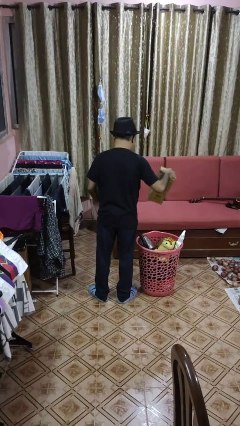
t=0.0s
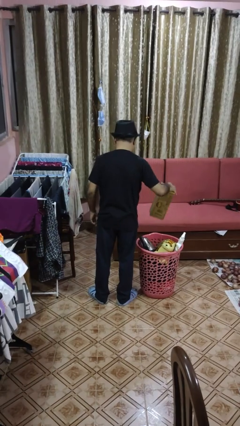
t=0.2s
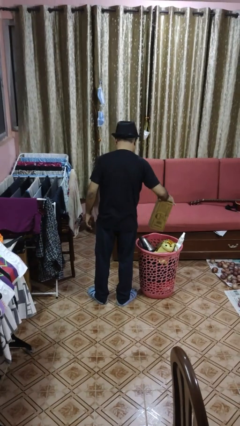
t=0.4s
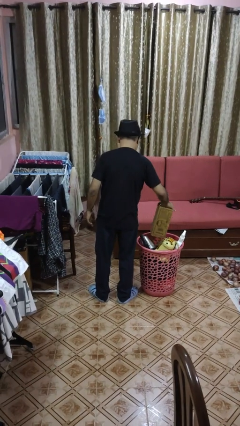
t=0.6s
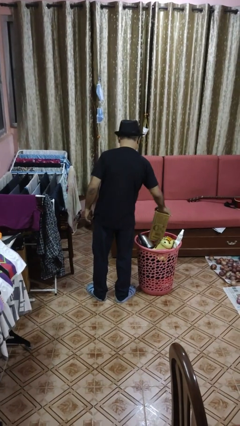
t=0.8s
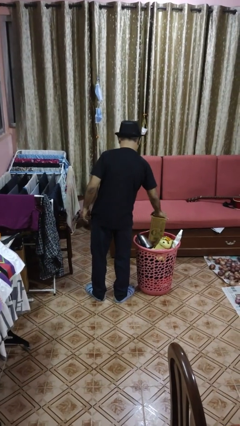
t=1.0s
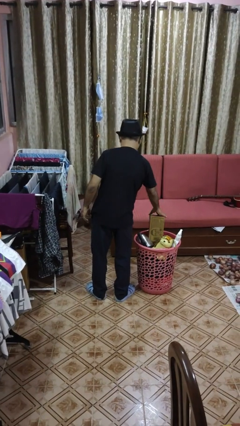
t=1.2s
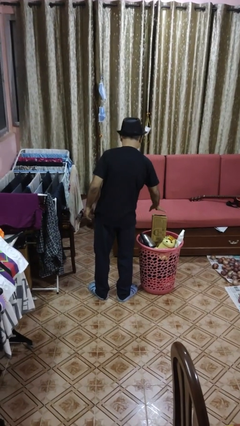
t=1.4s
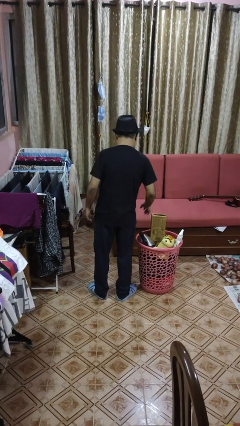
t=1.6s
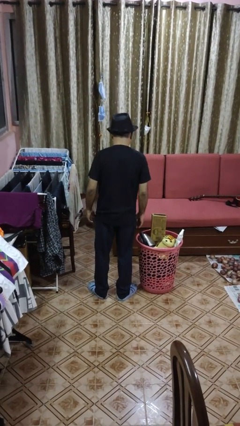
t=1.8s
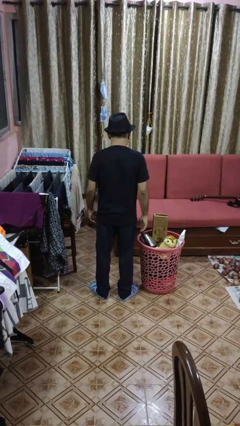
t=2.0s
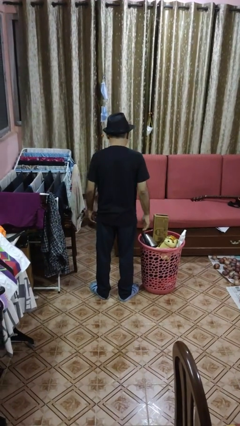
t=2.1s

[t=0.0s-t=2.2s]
person puts object into basket

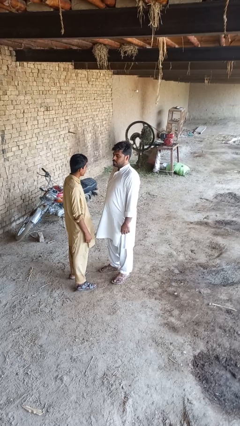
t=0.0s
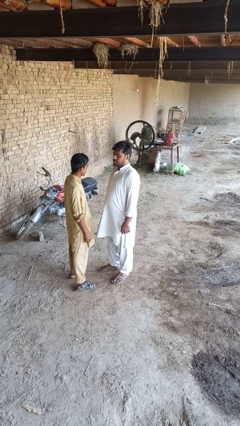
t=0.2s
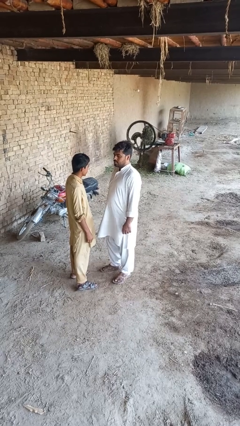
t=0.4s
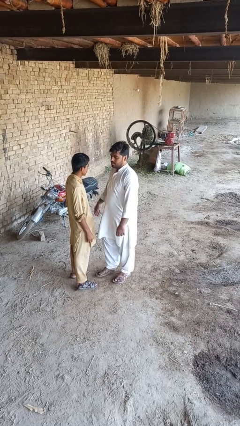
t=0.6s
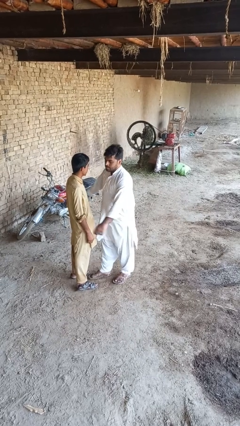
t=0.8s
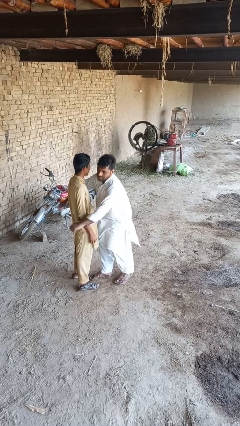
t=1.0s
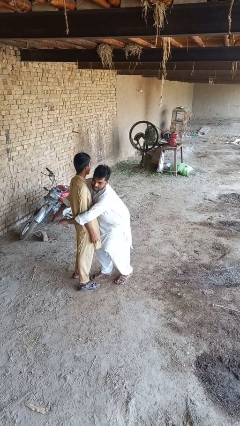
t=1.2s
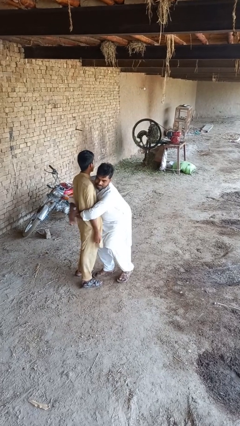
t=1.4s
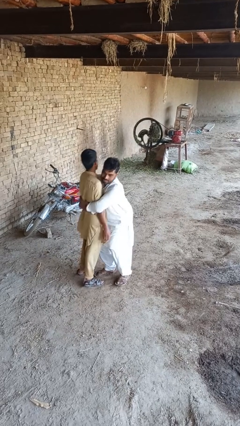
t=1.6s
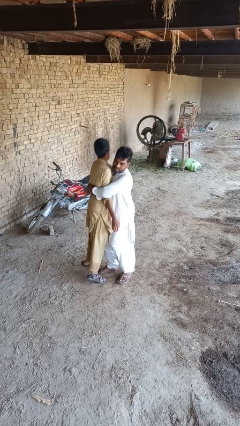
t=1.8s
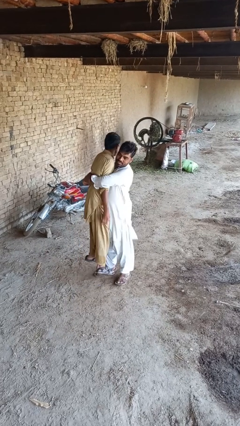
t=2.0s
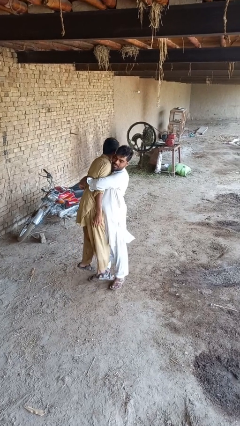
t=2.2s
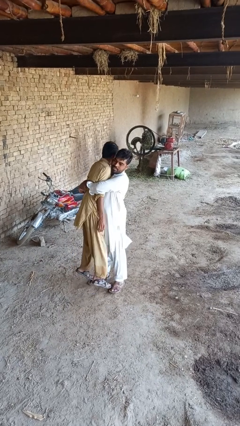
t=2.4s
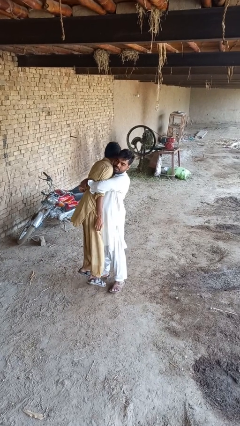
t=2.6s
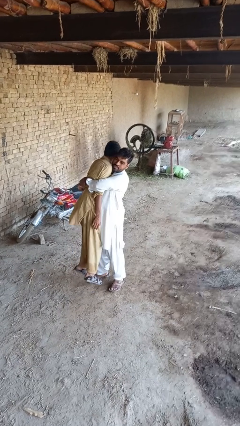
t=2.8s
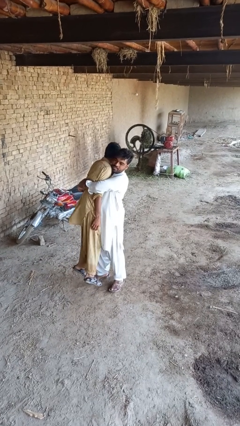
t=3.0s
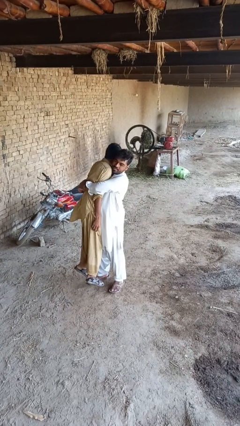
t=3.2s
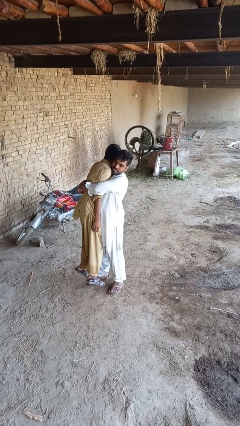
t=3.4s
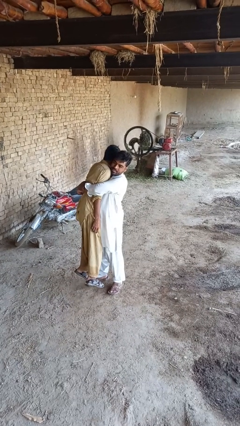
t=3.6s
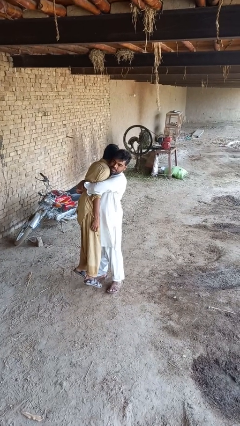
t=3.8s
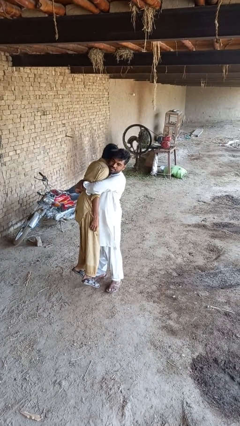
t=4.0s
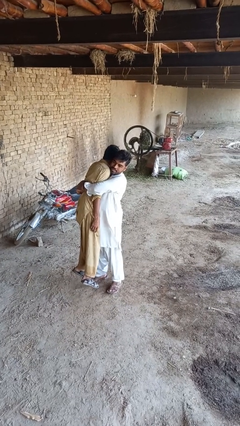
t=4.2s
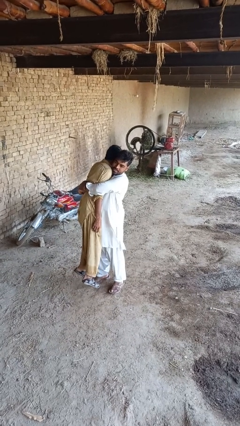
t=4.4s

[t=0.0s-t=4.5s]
person picks up person

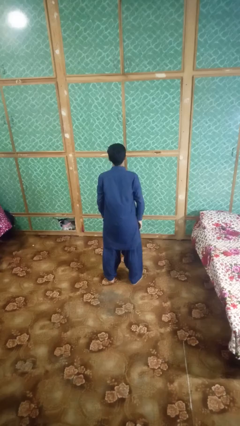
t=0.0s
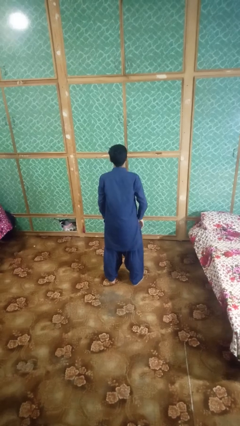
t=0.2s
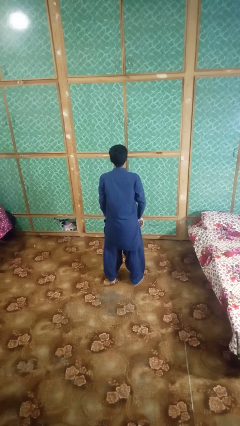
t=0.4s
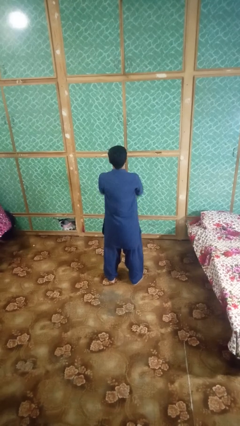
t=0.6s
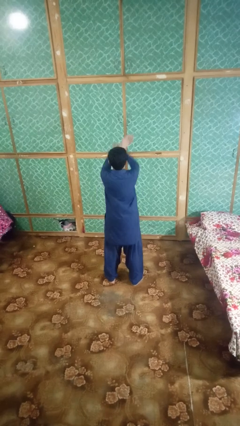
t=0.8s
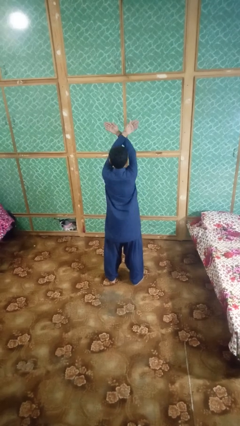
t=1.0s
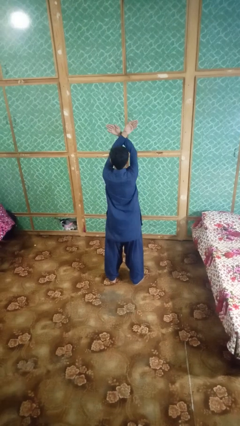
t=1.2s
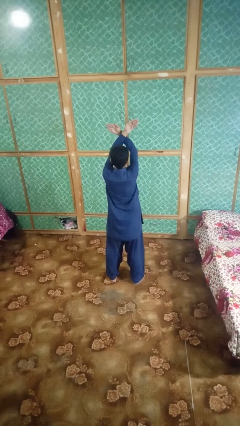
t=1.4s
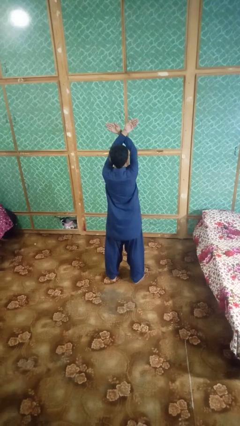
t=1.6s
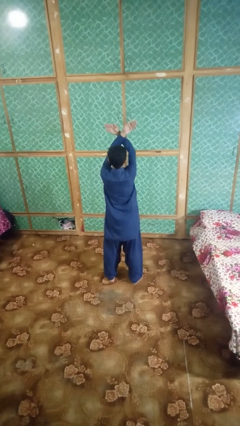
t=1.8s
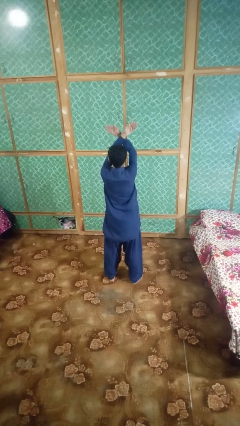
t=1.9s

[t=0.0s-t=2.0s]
person gestures arms x

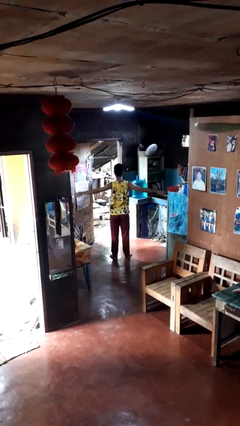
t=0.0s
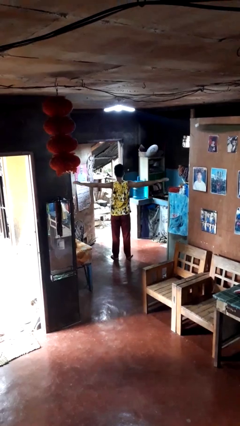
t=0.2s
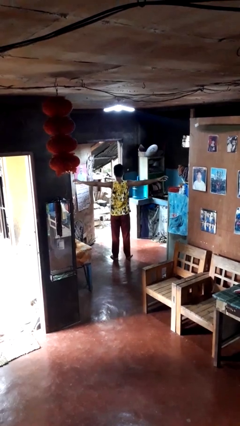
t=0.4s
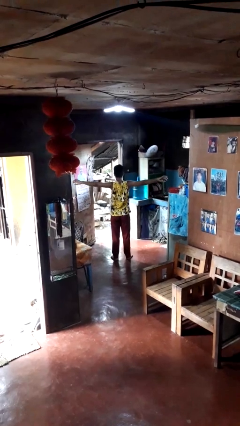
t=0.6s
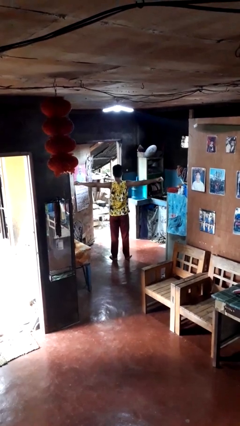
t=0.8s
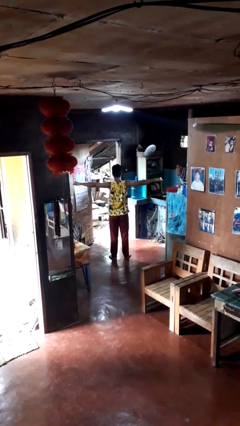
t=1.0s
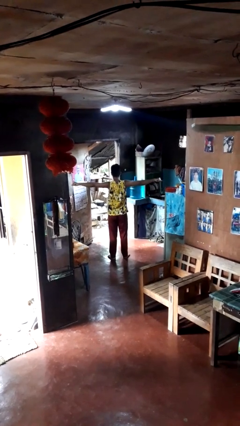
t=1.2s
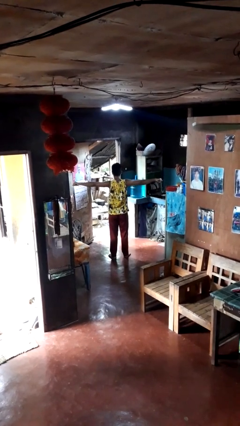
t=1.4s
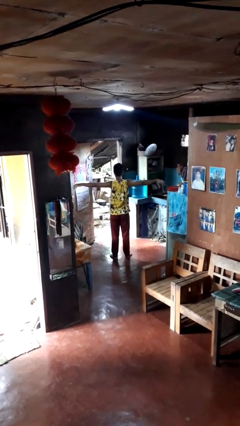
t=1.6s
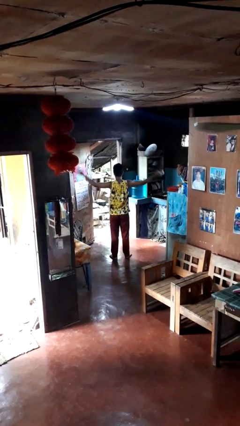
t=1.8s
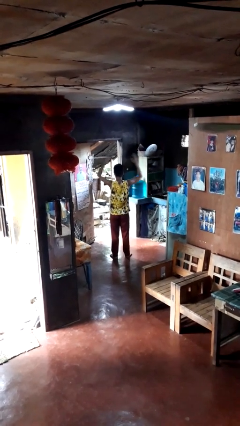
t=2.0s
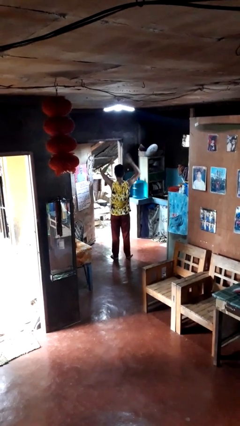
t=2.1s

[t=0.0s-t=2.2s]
person stretches arms to side

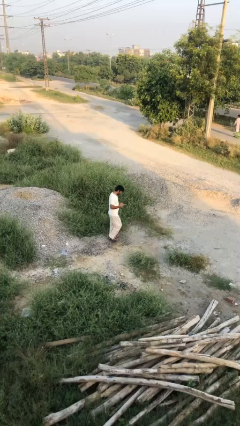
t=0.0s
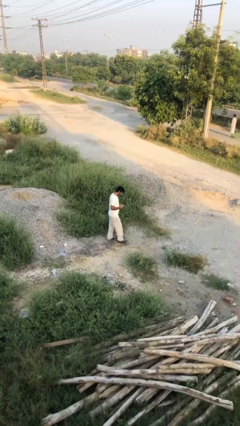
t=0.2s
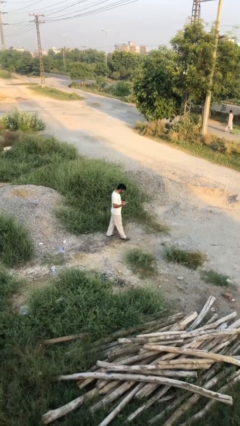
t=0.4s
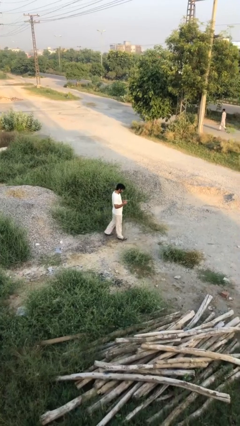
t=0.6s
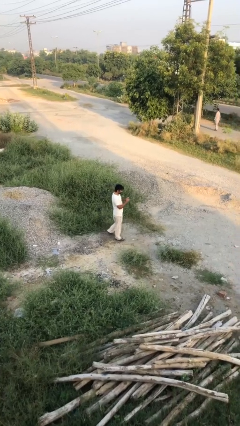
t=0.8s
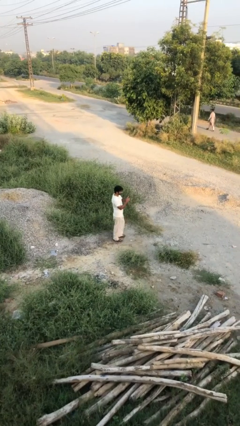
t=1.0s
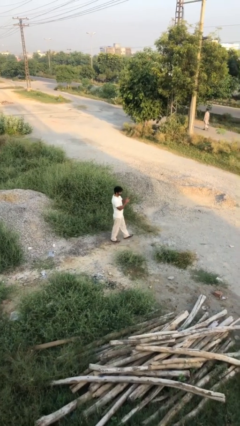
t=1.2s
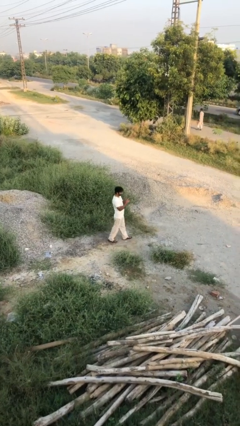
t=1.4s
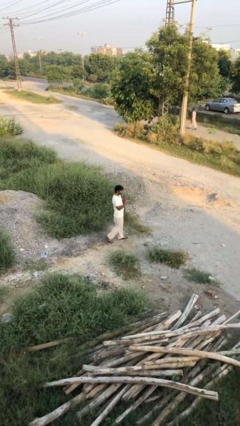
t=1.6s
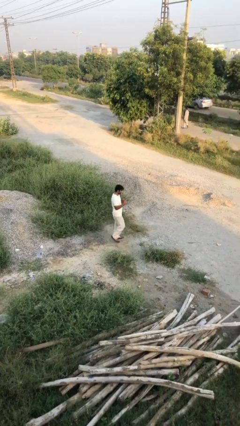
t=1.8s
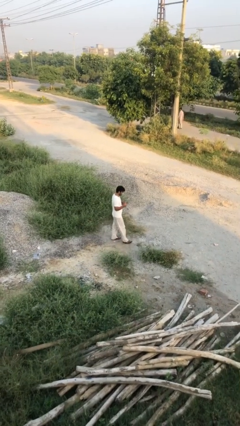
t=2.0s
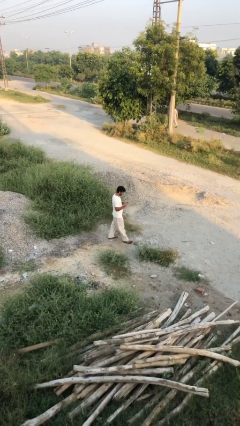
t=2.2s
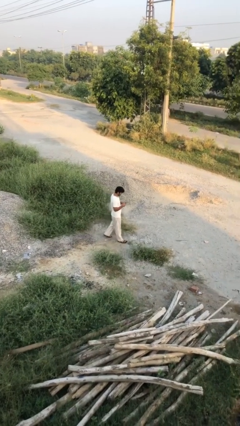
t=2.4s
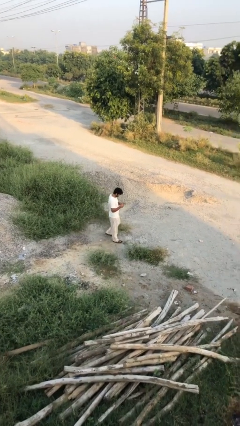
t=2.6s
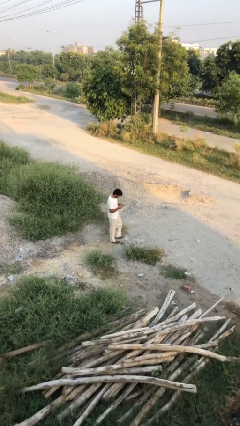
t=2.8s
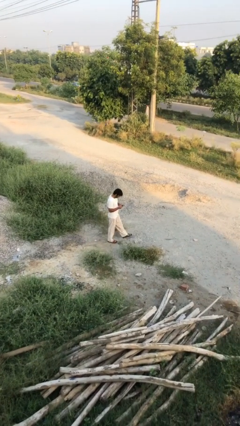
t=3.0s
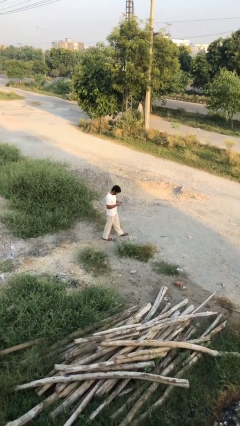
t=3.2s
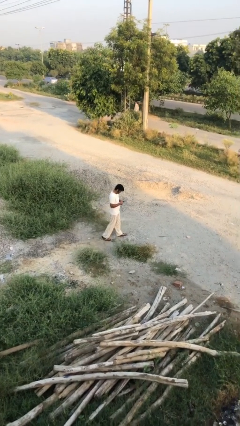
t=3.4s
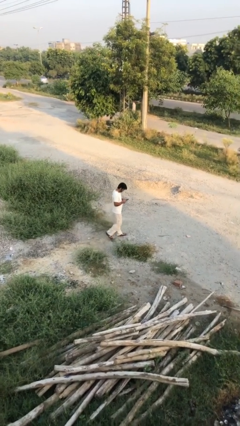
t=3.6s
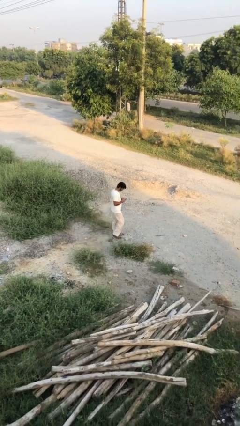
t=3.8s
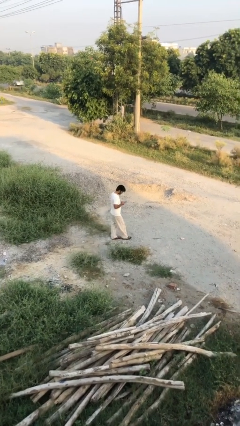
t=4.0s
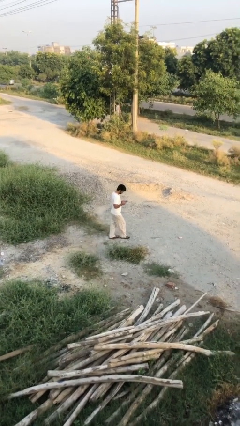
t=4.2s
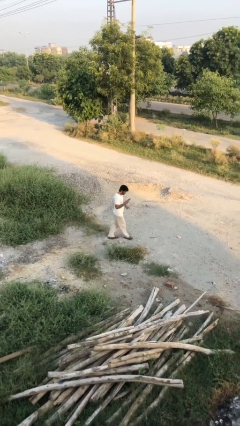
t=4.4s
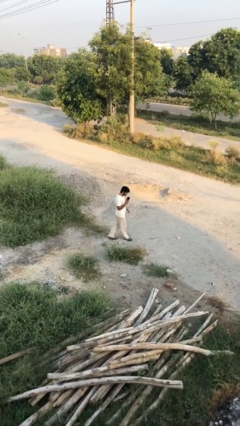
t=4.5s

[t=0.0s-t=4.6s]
person texts on phone

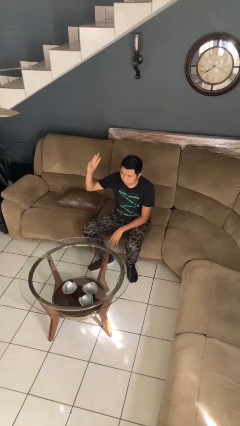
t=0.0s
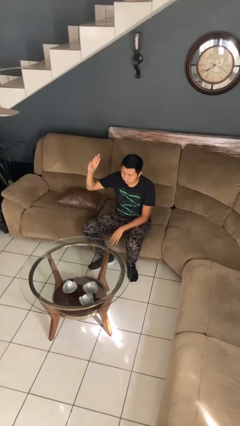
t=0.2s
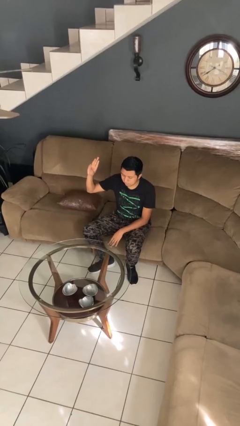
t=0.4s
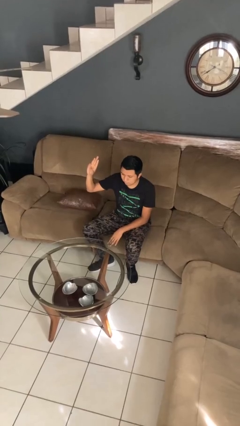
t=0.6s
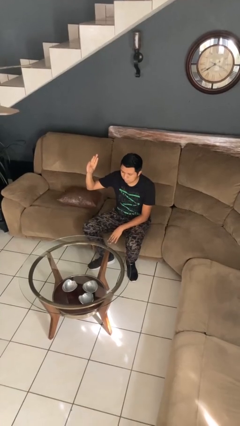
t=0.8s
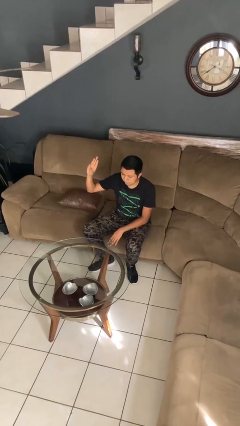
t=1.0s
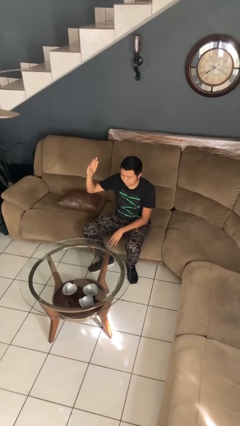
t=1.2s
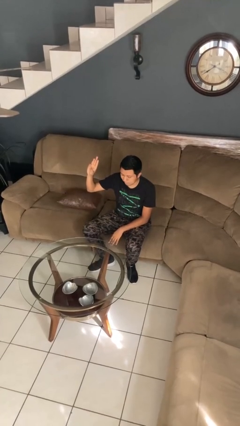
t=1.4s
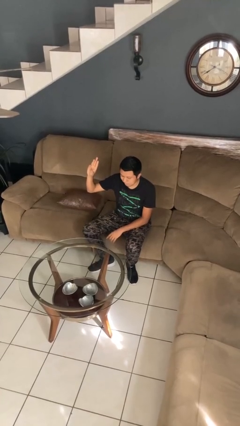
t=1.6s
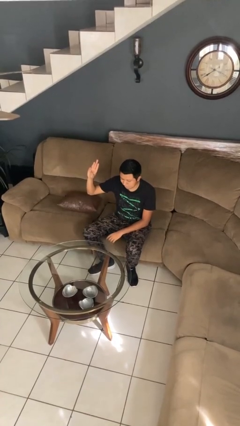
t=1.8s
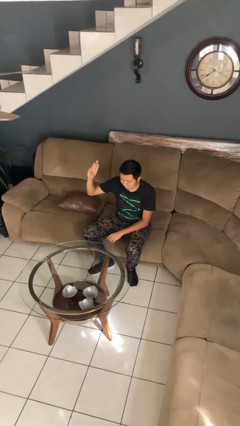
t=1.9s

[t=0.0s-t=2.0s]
person gestures number three
